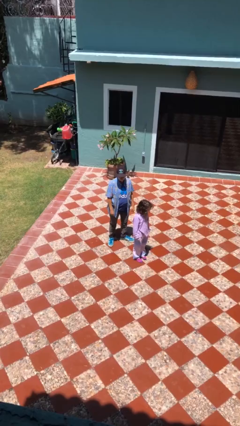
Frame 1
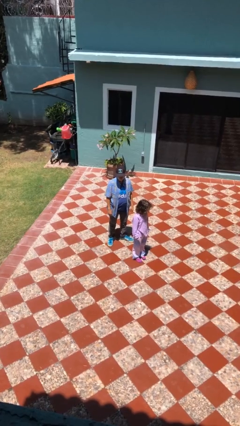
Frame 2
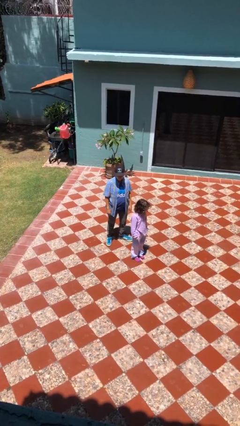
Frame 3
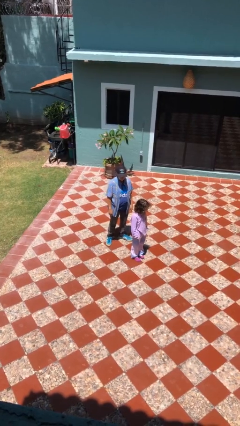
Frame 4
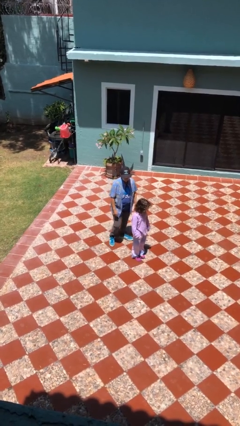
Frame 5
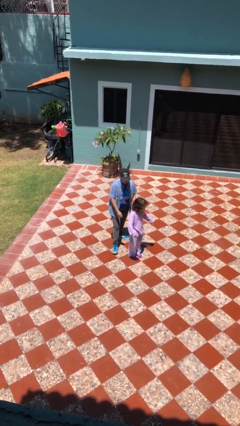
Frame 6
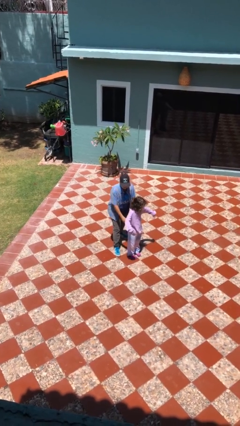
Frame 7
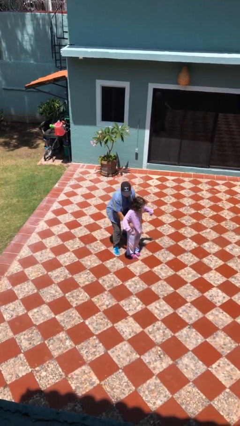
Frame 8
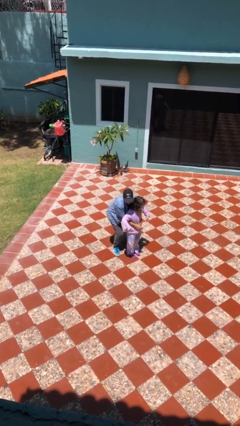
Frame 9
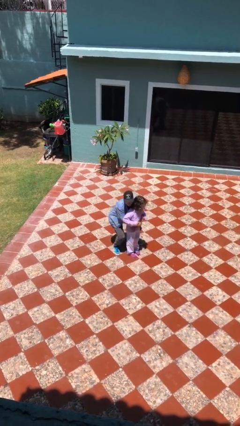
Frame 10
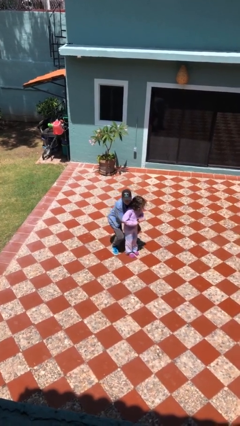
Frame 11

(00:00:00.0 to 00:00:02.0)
person picks up person

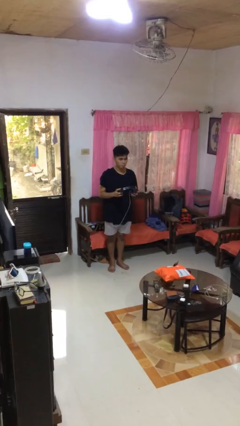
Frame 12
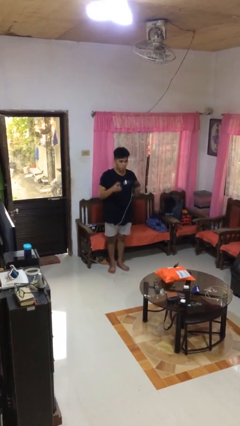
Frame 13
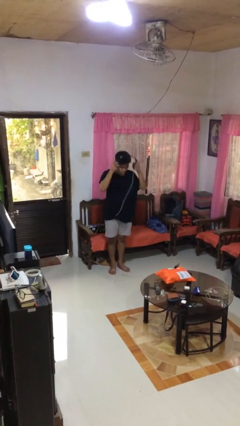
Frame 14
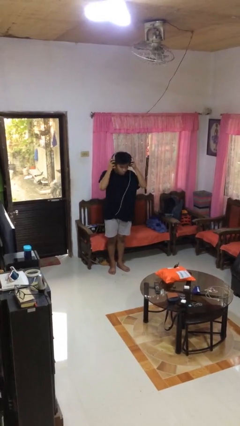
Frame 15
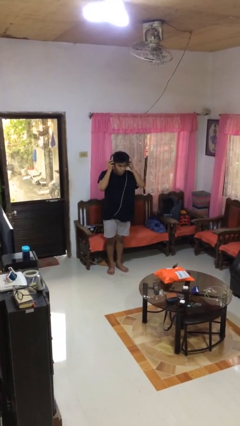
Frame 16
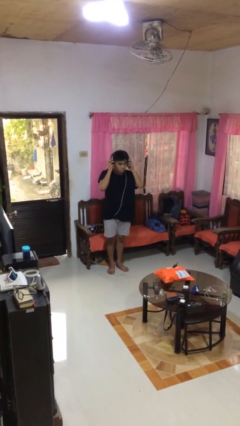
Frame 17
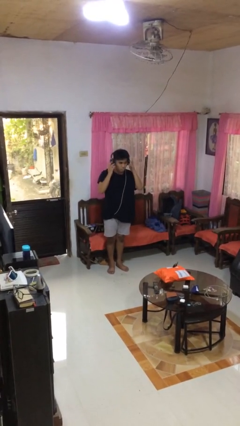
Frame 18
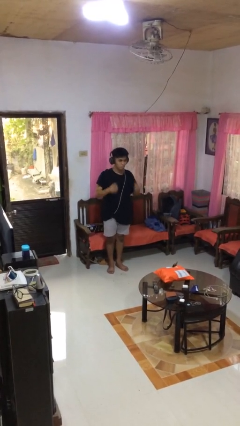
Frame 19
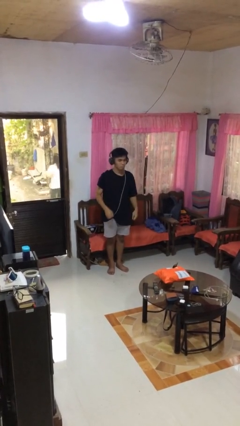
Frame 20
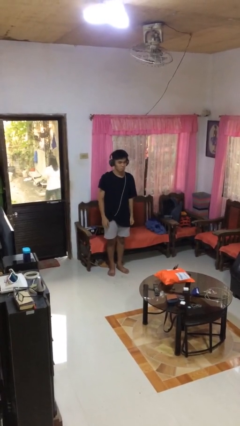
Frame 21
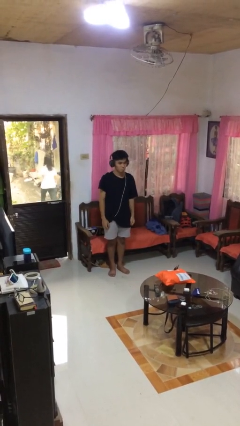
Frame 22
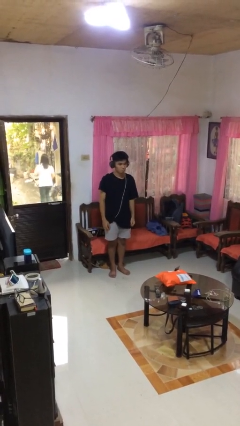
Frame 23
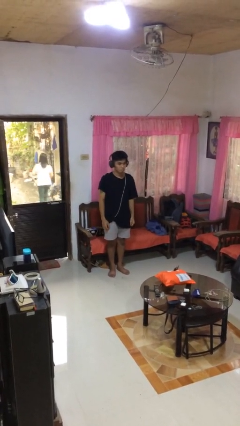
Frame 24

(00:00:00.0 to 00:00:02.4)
person puts on headphones

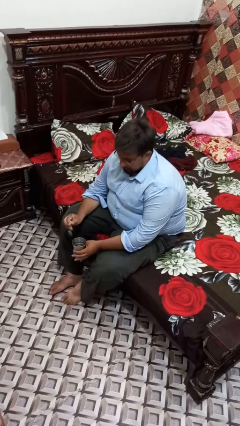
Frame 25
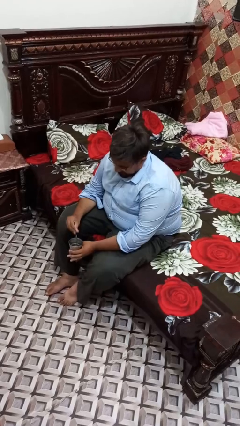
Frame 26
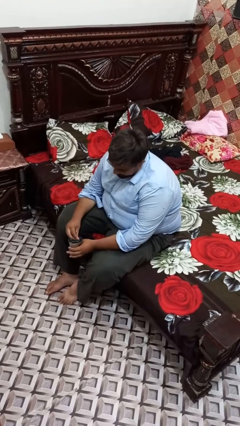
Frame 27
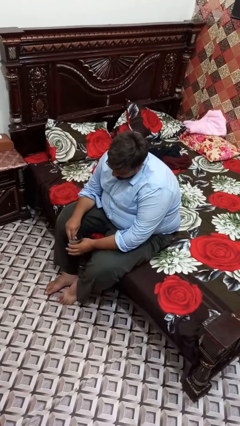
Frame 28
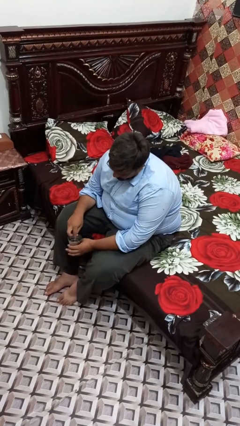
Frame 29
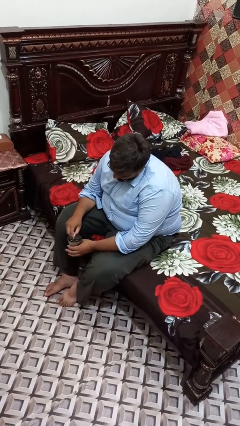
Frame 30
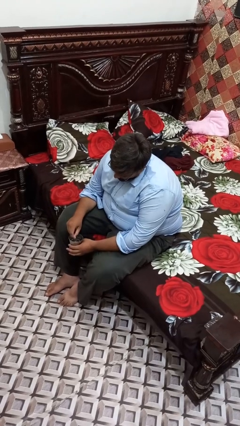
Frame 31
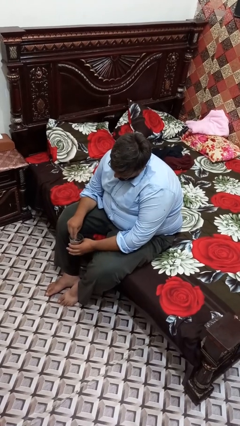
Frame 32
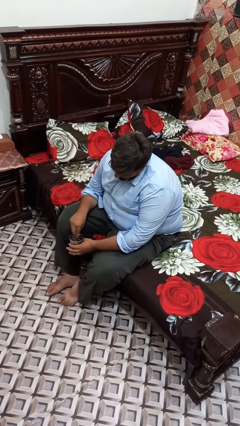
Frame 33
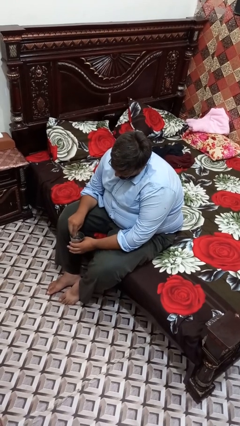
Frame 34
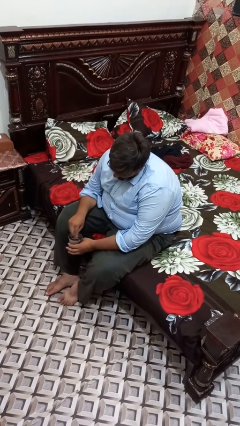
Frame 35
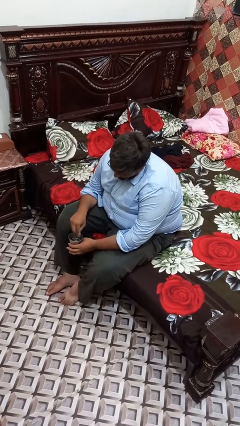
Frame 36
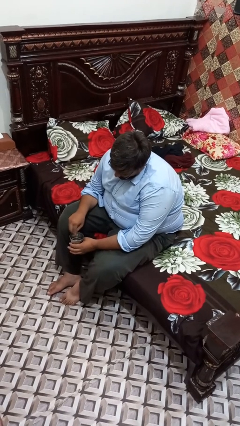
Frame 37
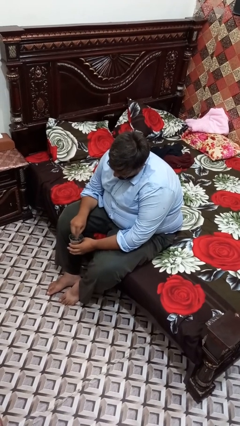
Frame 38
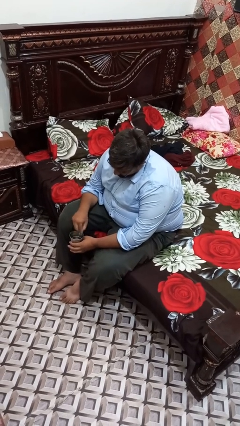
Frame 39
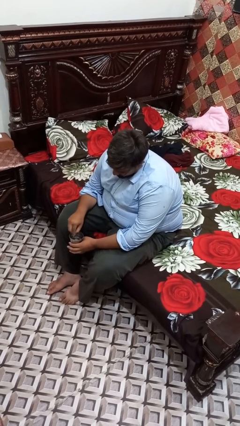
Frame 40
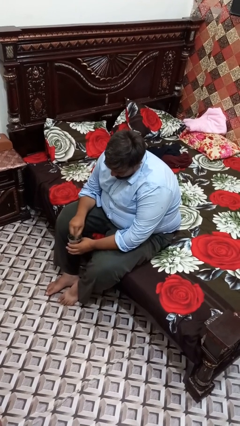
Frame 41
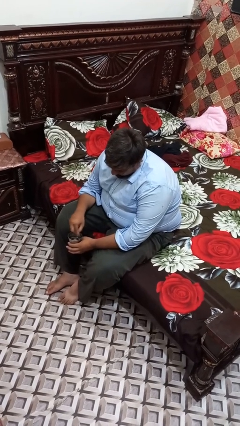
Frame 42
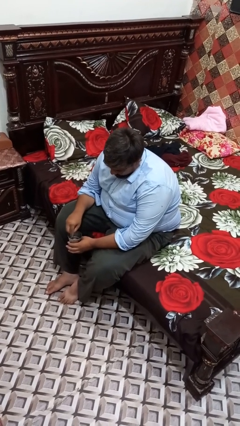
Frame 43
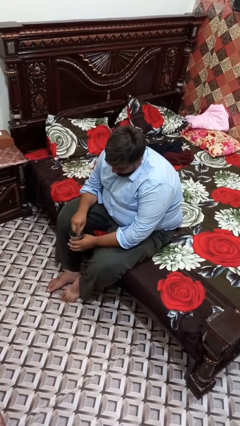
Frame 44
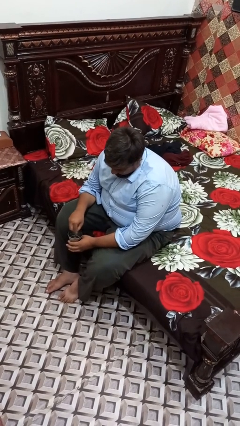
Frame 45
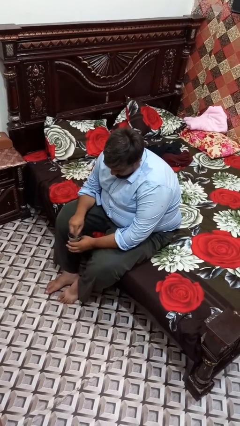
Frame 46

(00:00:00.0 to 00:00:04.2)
person stirs mug

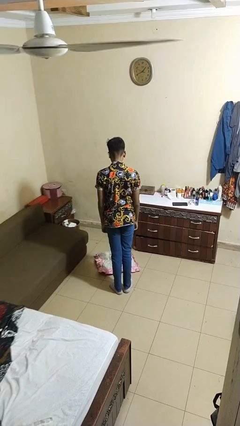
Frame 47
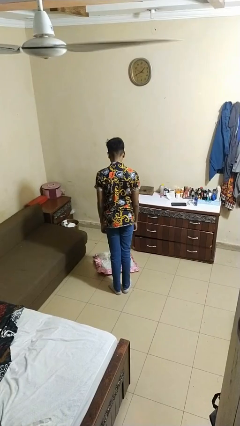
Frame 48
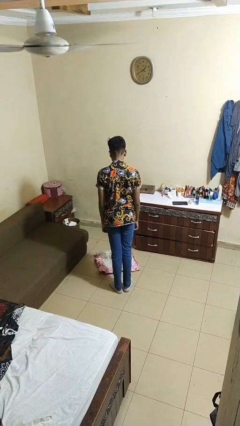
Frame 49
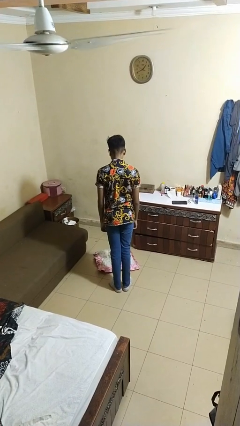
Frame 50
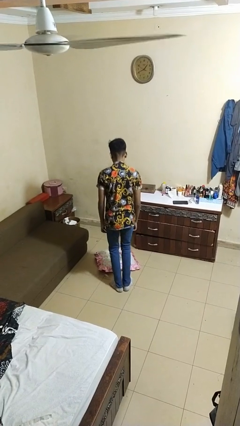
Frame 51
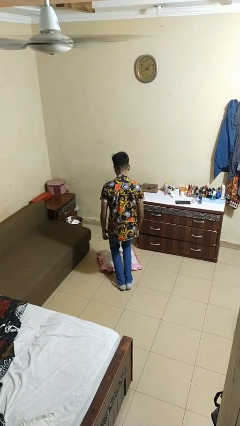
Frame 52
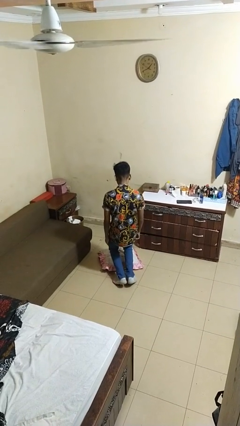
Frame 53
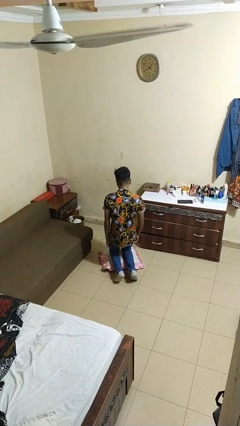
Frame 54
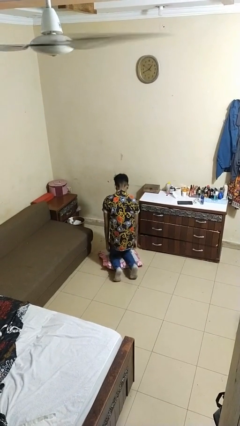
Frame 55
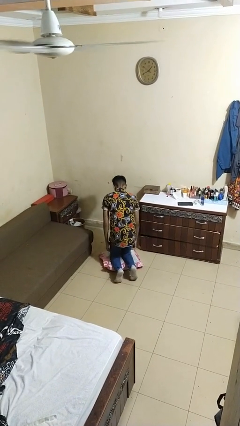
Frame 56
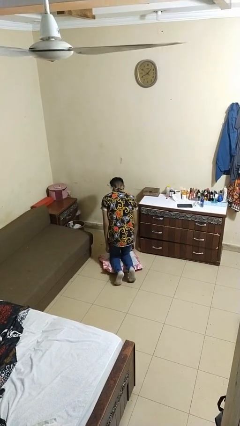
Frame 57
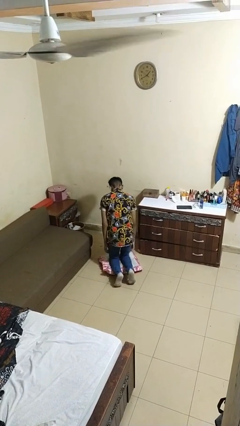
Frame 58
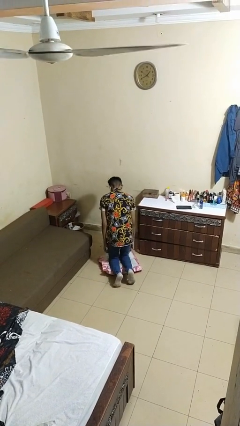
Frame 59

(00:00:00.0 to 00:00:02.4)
person kneels

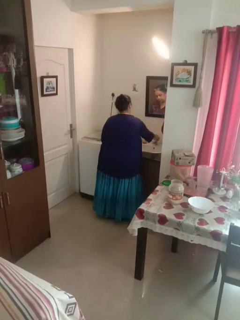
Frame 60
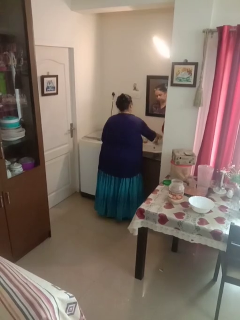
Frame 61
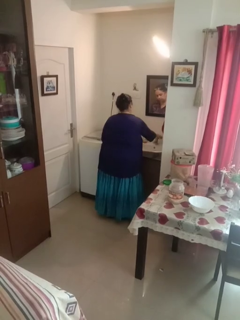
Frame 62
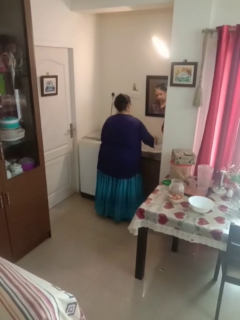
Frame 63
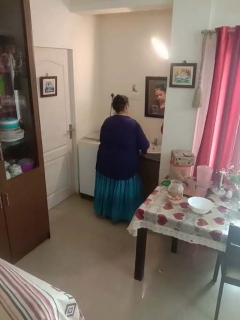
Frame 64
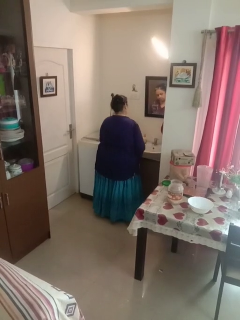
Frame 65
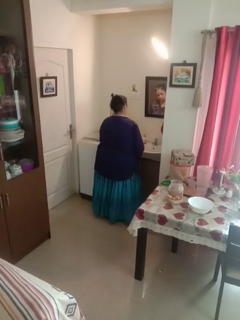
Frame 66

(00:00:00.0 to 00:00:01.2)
person turns on faucet

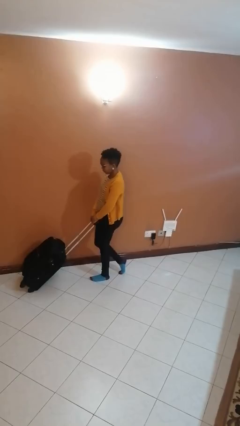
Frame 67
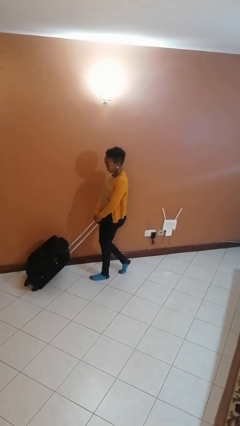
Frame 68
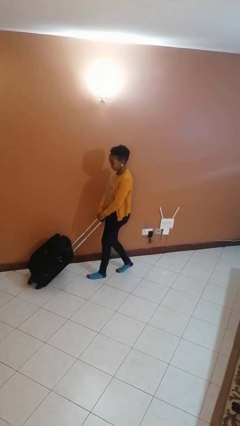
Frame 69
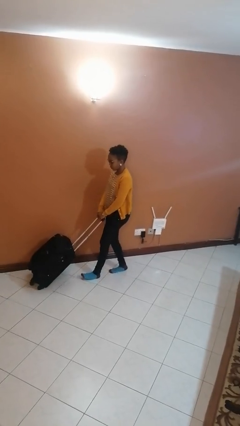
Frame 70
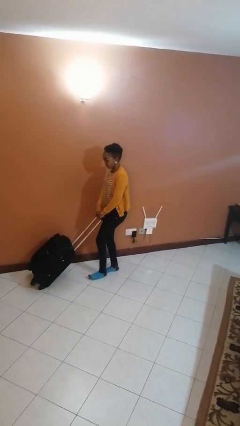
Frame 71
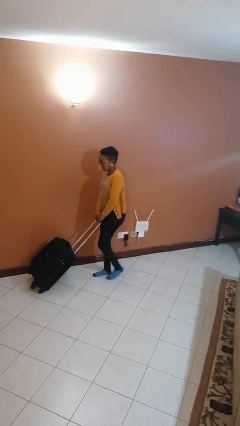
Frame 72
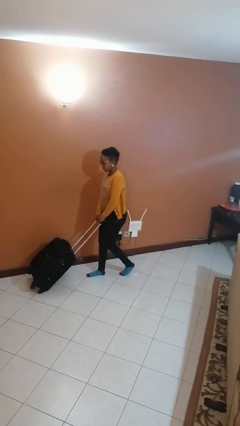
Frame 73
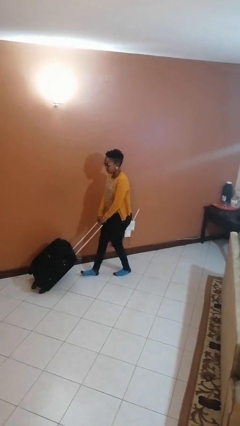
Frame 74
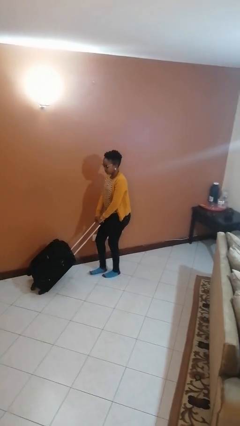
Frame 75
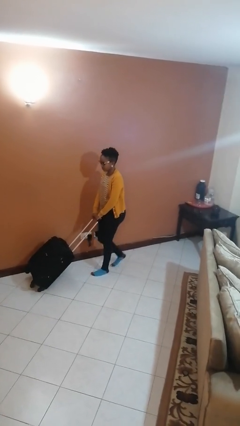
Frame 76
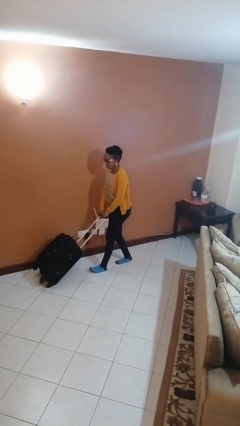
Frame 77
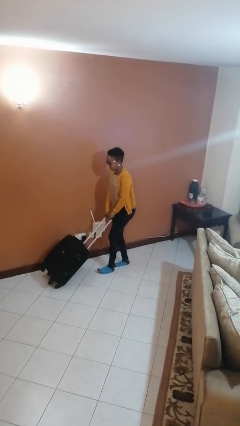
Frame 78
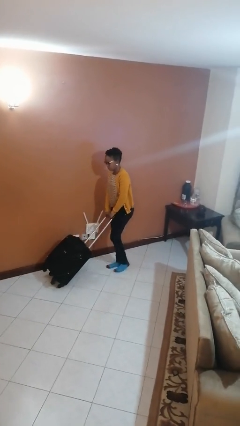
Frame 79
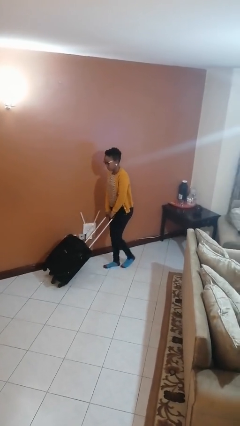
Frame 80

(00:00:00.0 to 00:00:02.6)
person pulls wheeled cart

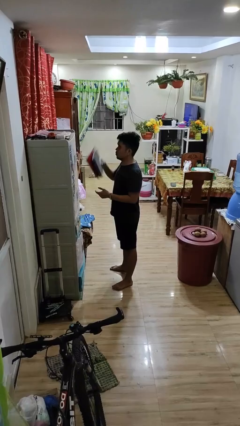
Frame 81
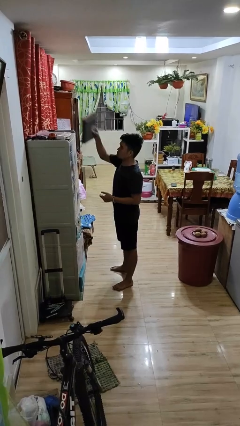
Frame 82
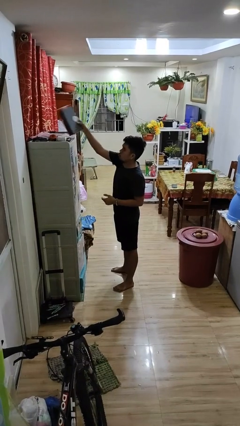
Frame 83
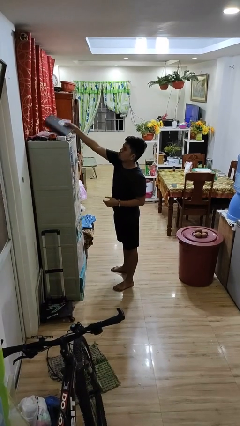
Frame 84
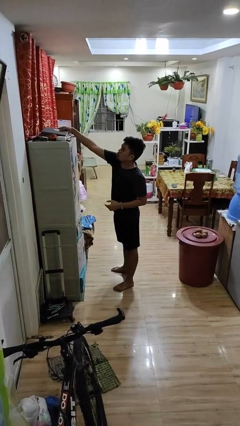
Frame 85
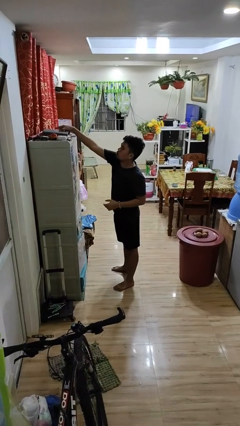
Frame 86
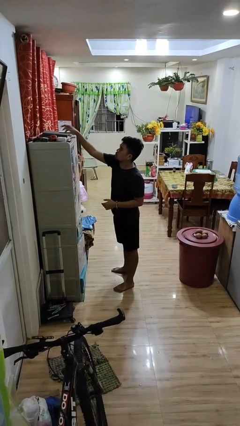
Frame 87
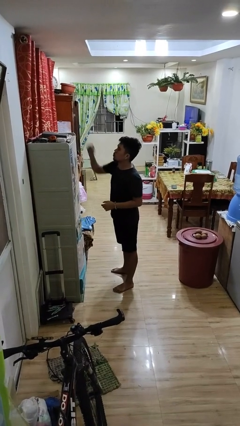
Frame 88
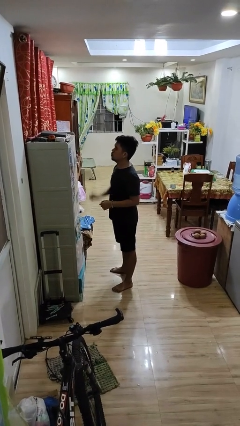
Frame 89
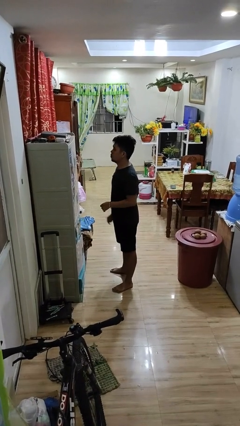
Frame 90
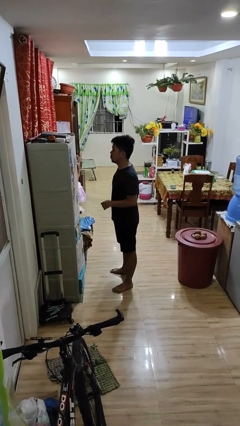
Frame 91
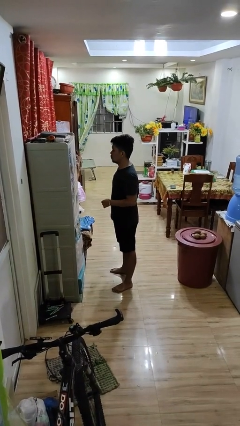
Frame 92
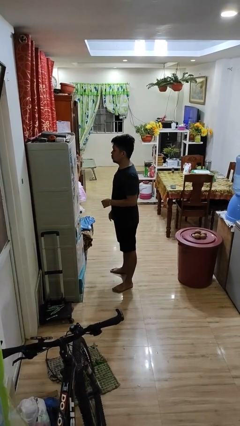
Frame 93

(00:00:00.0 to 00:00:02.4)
person puts down object on shelf
